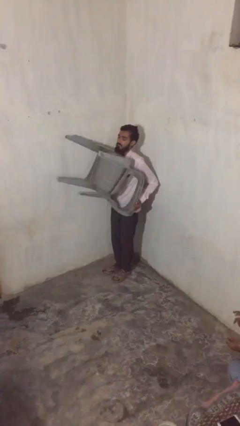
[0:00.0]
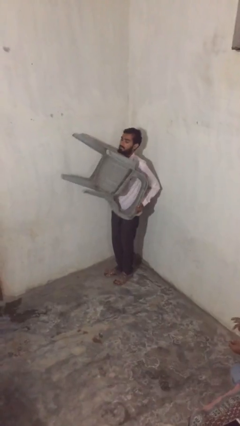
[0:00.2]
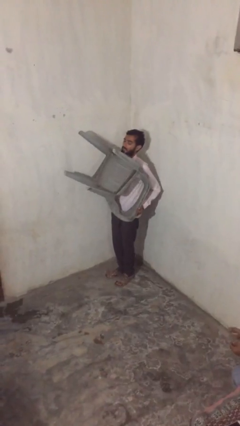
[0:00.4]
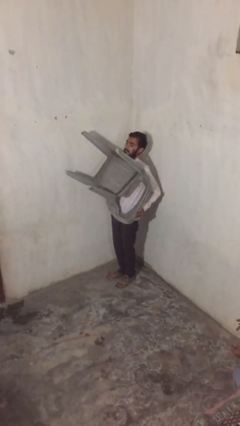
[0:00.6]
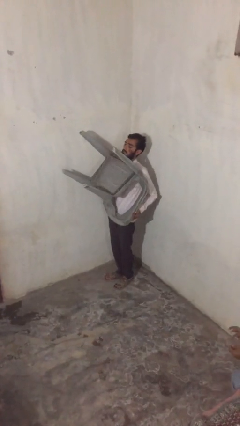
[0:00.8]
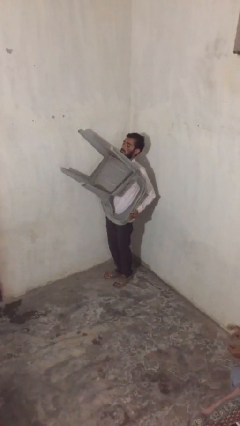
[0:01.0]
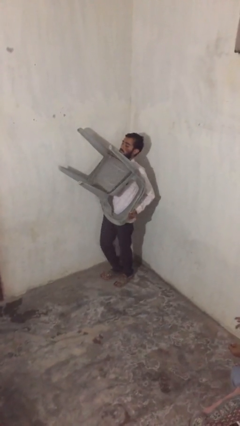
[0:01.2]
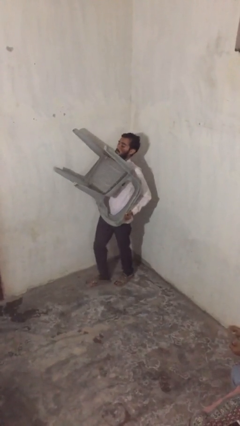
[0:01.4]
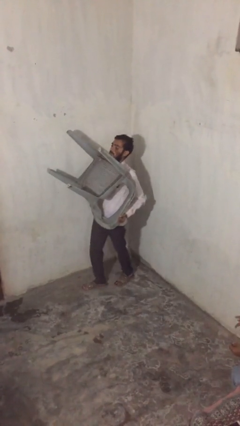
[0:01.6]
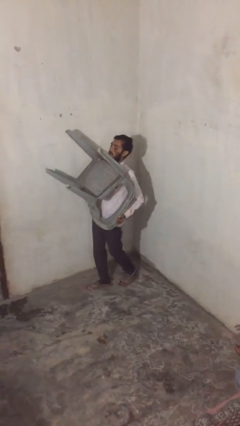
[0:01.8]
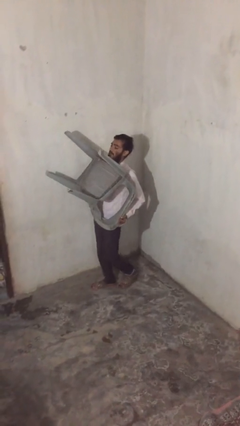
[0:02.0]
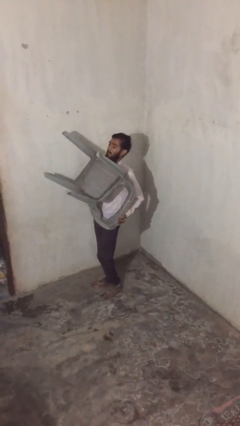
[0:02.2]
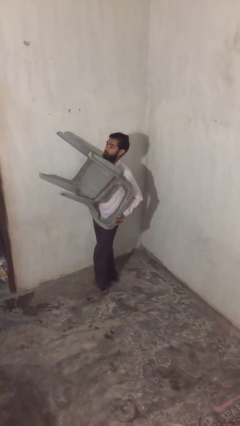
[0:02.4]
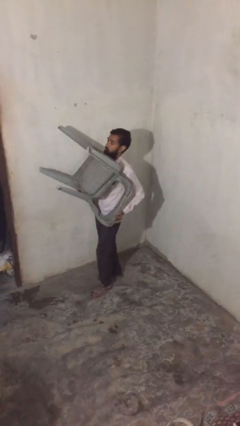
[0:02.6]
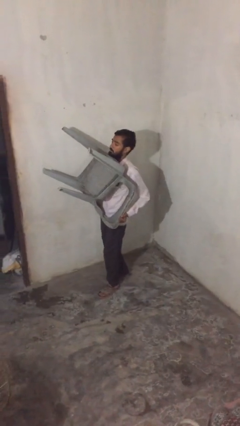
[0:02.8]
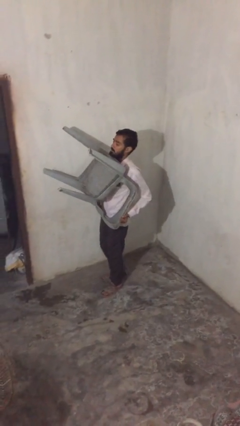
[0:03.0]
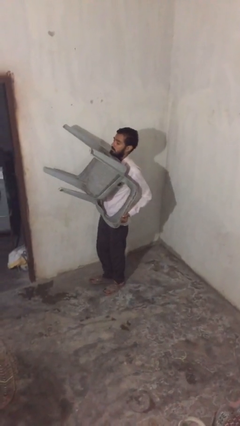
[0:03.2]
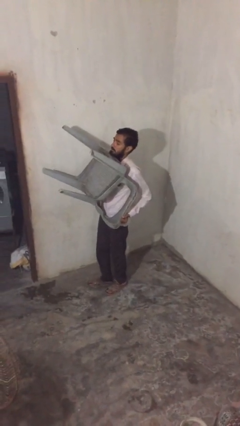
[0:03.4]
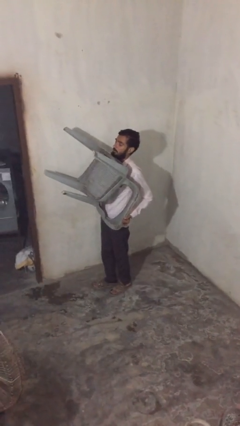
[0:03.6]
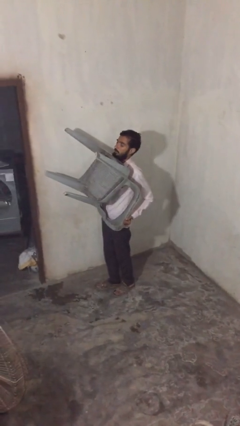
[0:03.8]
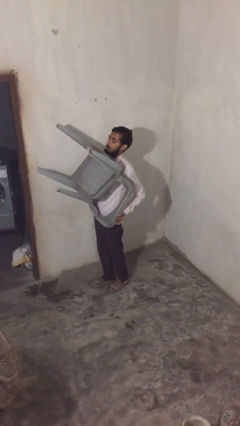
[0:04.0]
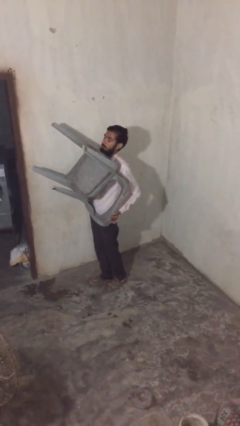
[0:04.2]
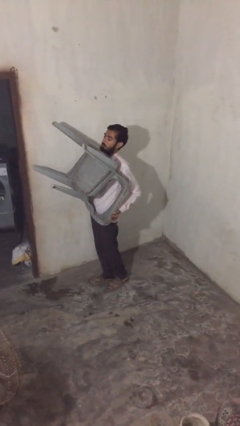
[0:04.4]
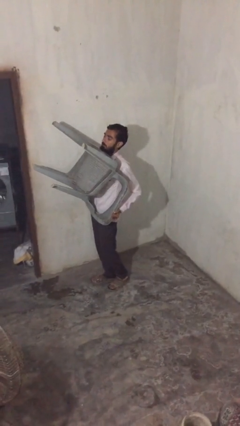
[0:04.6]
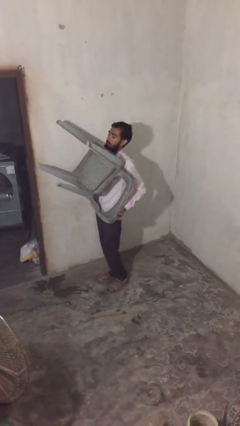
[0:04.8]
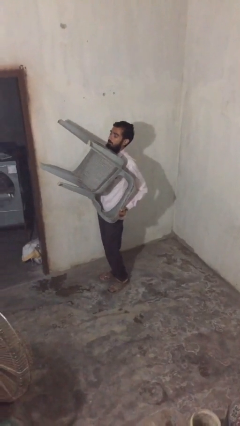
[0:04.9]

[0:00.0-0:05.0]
person carries heavy object

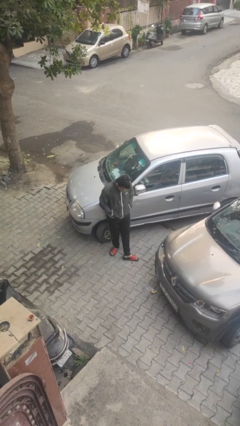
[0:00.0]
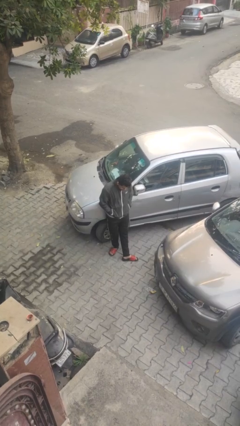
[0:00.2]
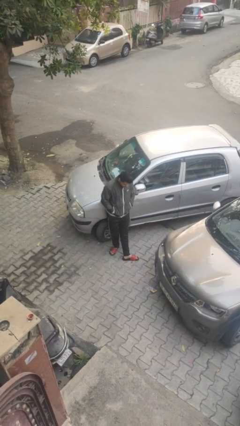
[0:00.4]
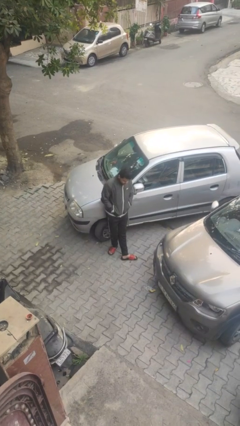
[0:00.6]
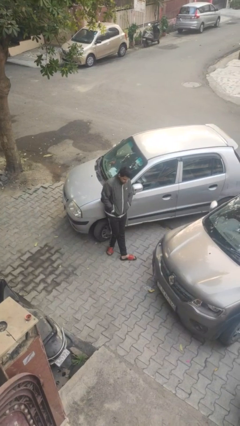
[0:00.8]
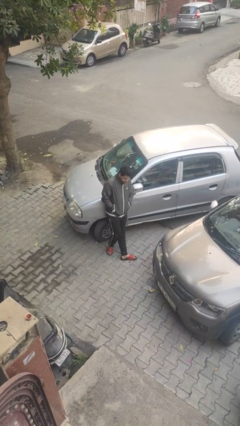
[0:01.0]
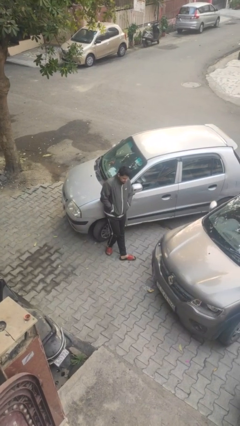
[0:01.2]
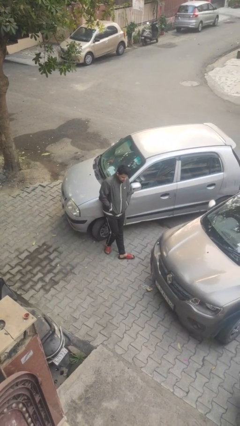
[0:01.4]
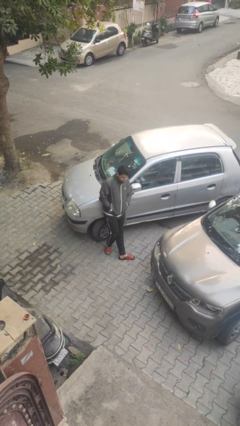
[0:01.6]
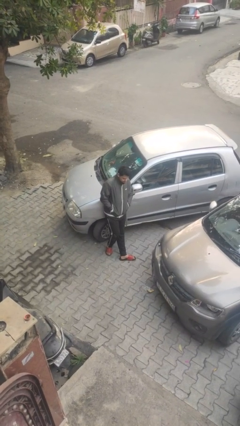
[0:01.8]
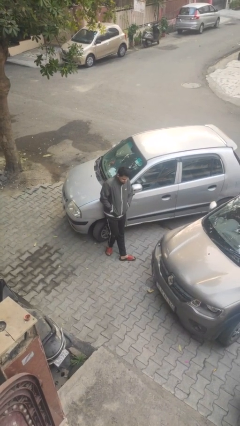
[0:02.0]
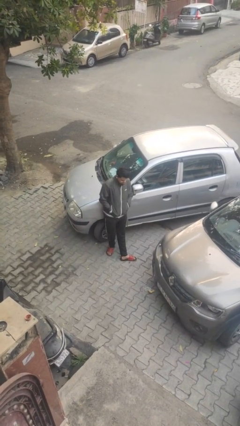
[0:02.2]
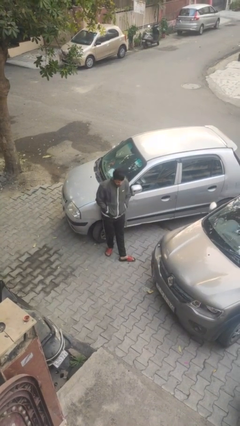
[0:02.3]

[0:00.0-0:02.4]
person leans against car

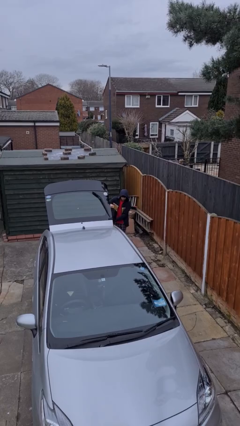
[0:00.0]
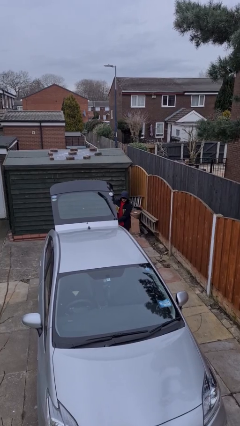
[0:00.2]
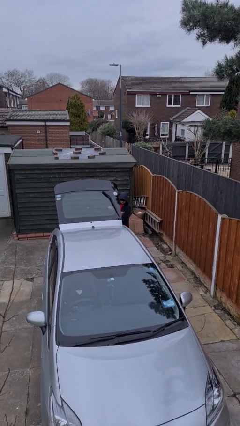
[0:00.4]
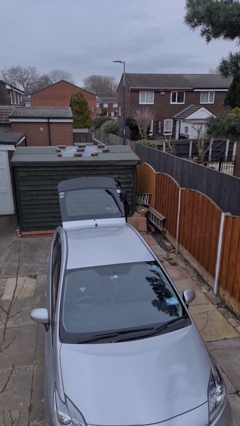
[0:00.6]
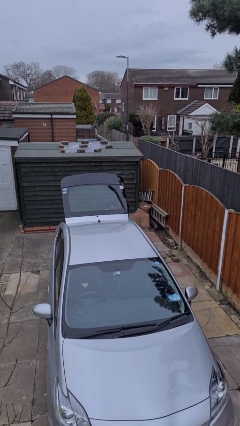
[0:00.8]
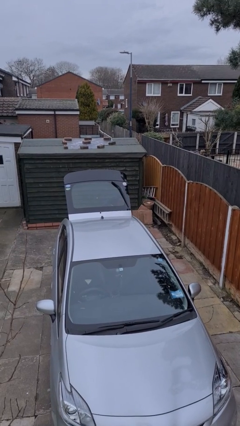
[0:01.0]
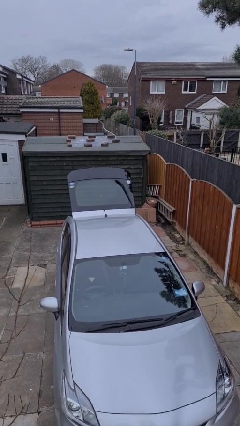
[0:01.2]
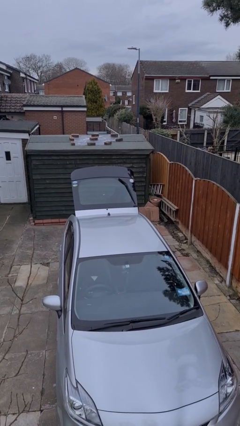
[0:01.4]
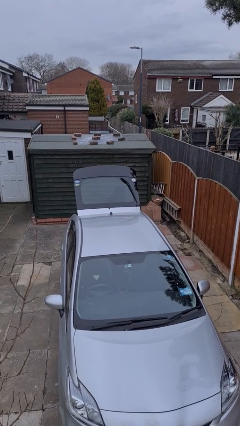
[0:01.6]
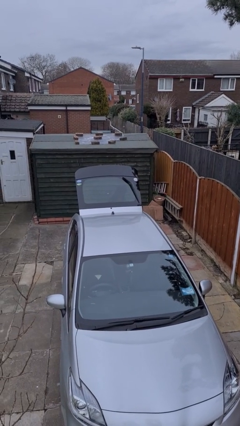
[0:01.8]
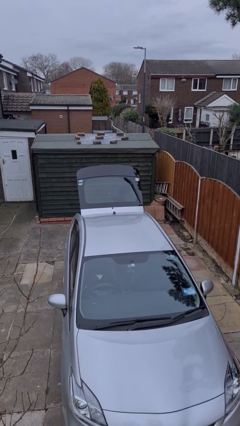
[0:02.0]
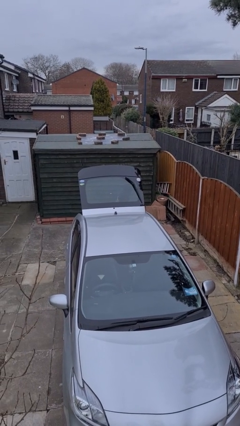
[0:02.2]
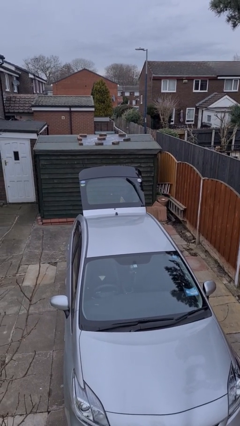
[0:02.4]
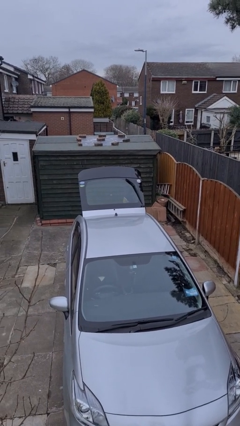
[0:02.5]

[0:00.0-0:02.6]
person loads car

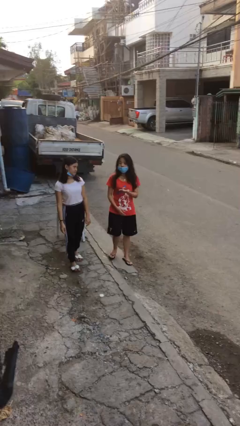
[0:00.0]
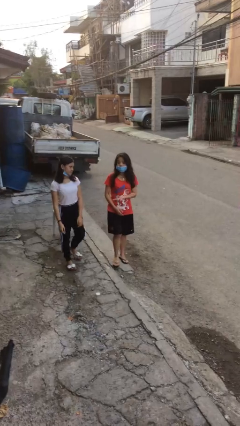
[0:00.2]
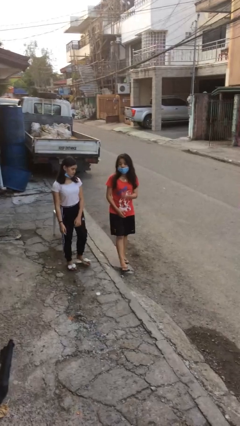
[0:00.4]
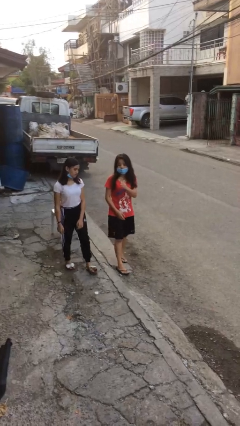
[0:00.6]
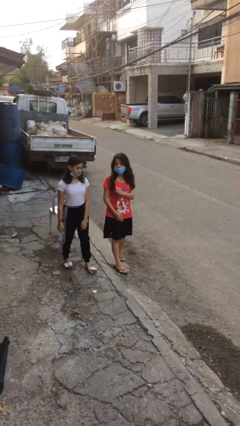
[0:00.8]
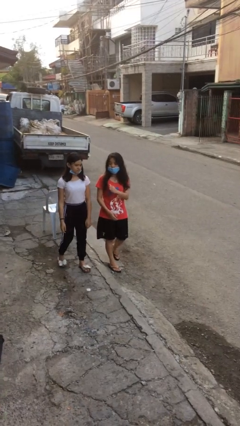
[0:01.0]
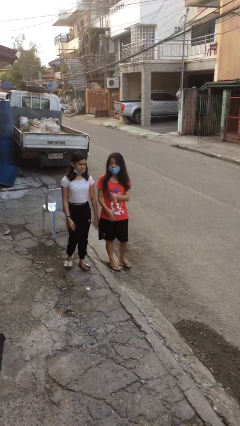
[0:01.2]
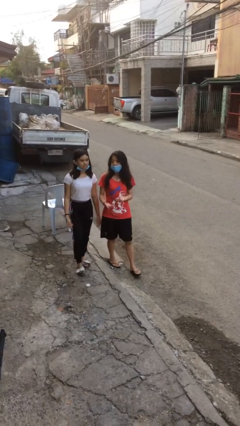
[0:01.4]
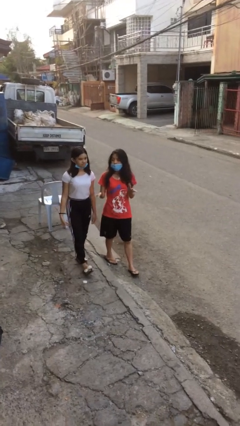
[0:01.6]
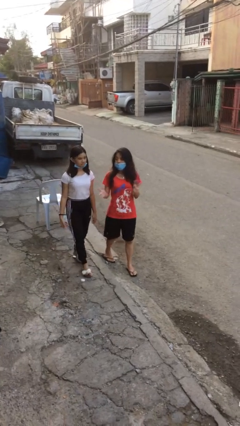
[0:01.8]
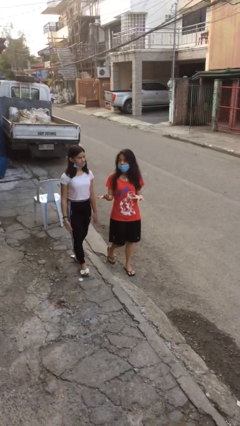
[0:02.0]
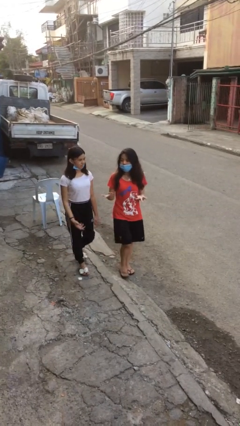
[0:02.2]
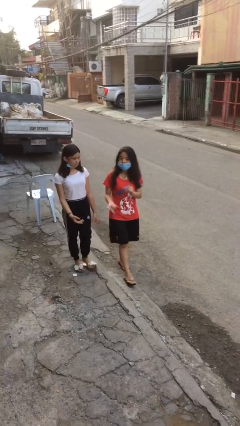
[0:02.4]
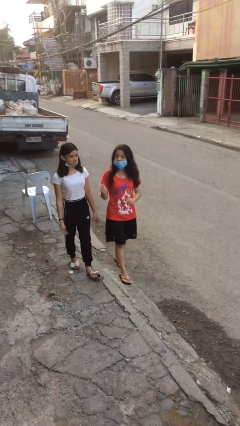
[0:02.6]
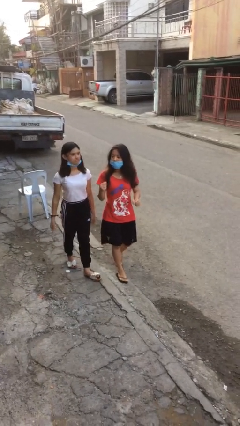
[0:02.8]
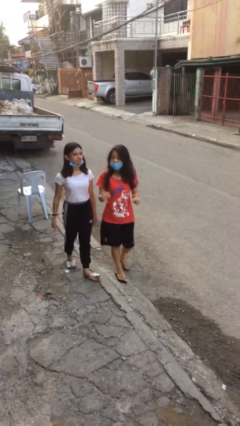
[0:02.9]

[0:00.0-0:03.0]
person talks to person

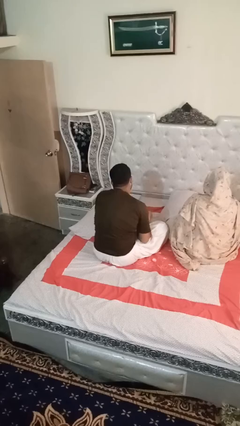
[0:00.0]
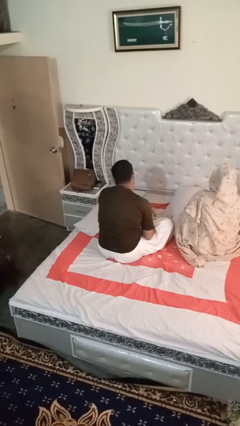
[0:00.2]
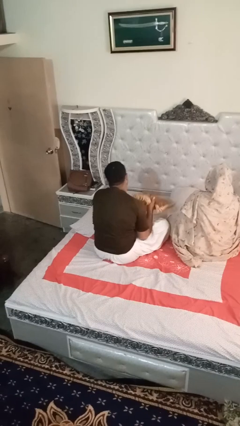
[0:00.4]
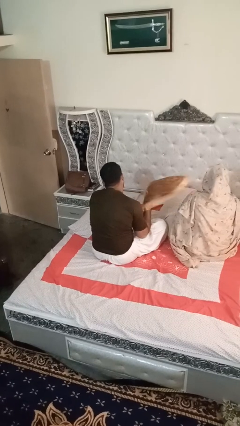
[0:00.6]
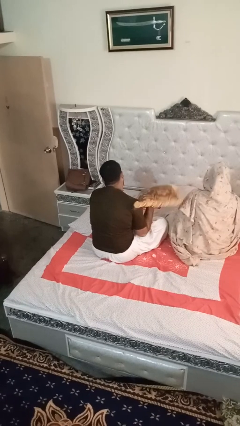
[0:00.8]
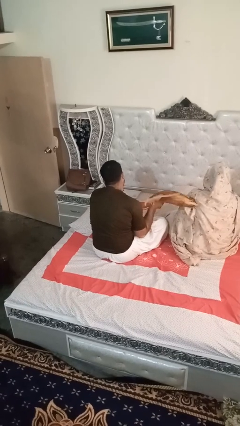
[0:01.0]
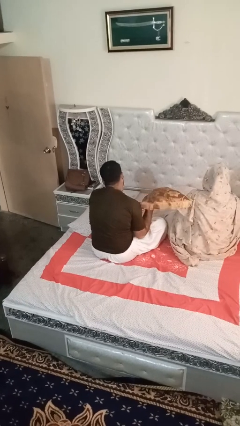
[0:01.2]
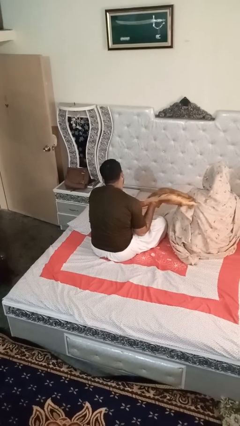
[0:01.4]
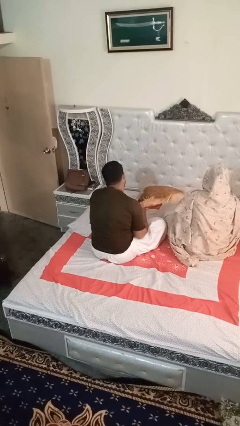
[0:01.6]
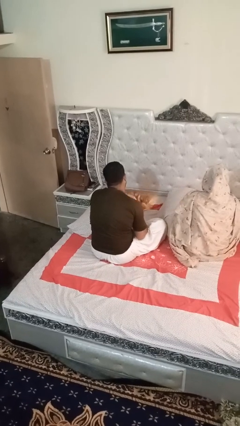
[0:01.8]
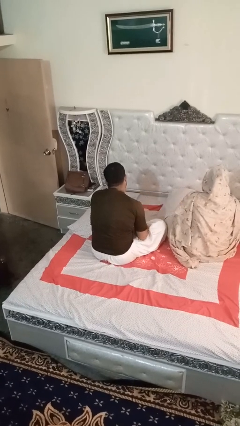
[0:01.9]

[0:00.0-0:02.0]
person hits person with pillow

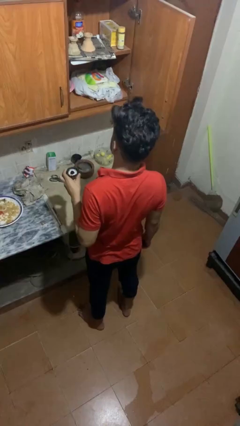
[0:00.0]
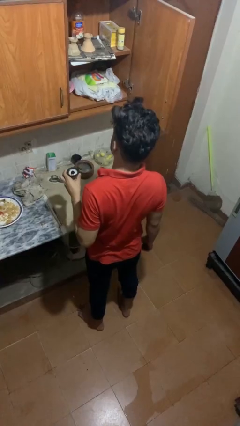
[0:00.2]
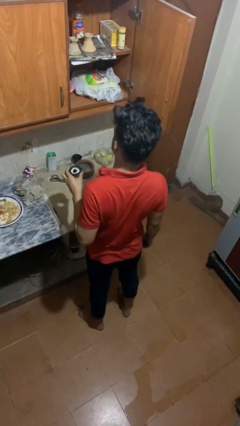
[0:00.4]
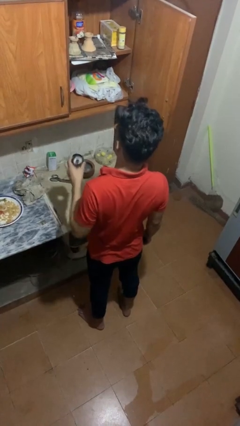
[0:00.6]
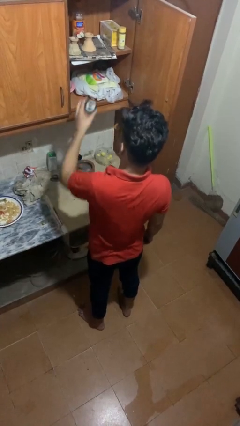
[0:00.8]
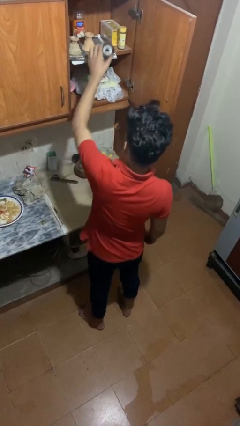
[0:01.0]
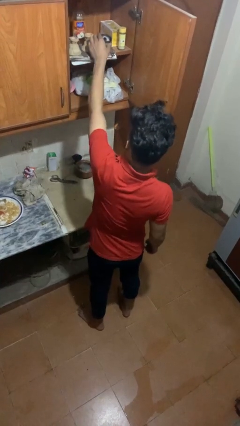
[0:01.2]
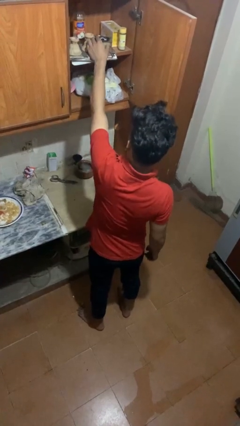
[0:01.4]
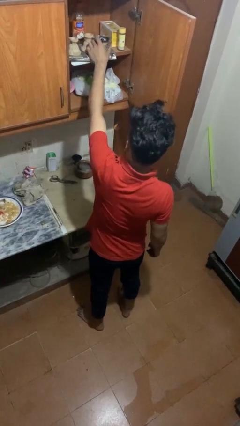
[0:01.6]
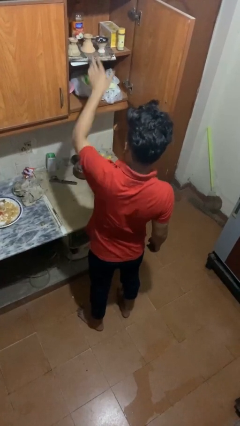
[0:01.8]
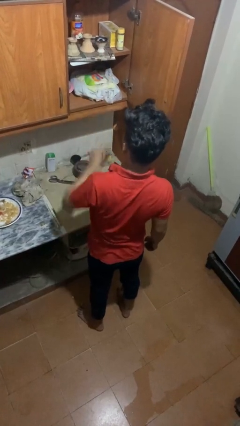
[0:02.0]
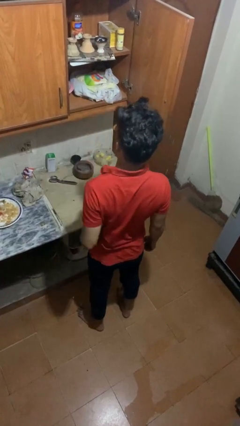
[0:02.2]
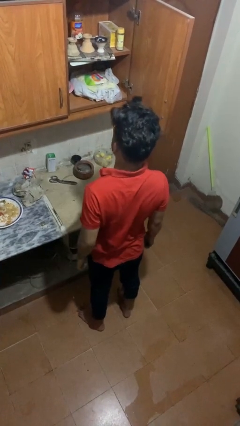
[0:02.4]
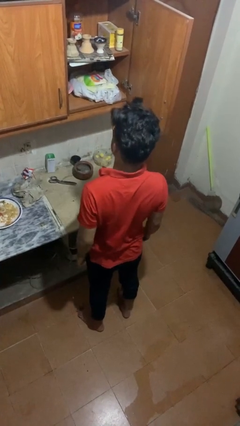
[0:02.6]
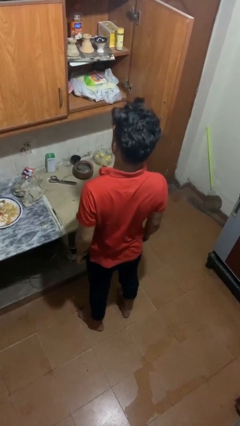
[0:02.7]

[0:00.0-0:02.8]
person puts object in cabinet
